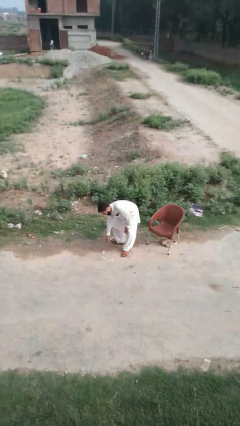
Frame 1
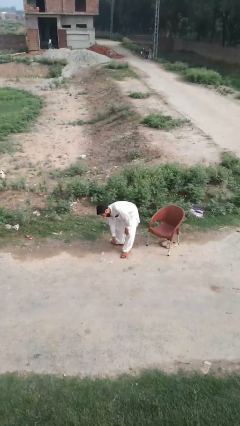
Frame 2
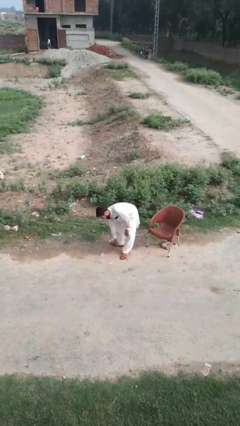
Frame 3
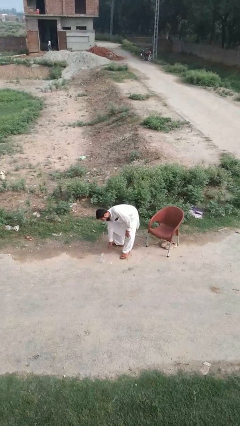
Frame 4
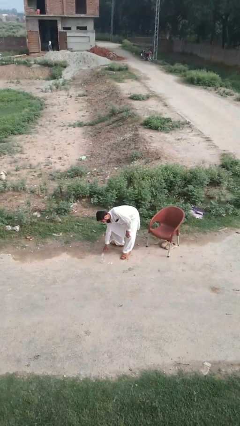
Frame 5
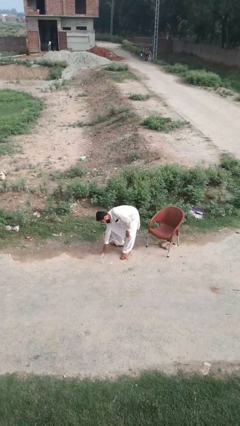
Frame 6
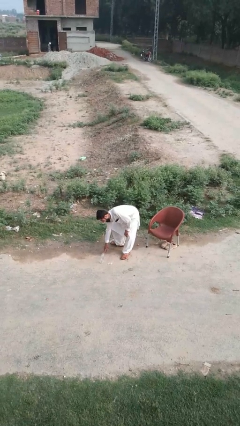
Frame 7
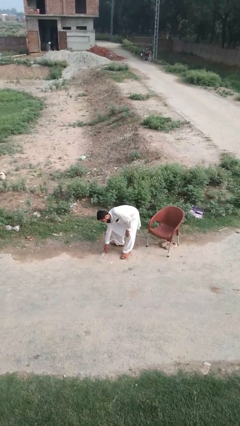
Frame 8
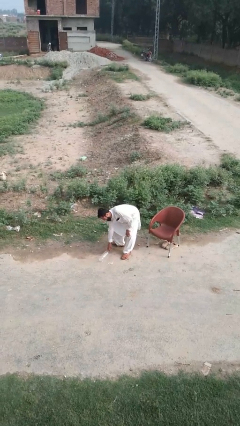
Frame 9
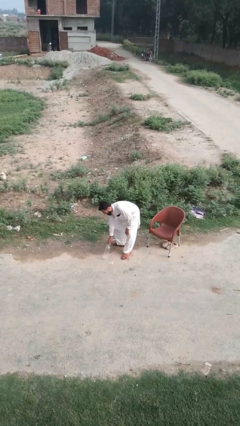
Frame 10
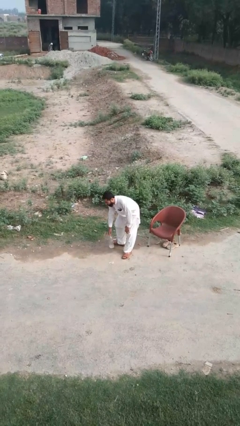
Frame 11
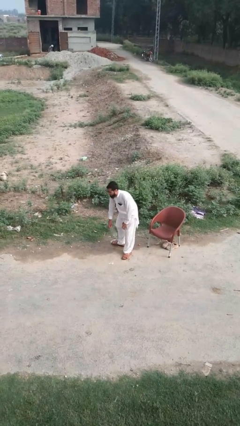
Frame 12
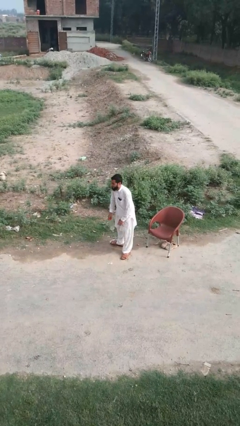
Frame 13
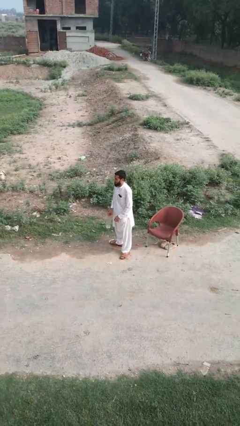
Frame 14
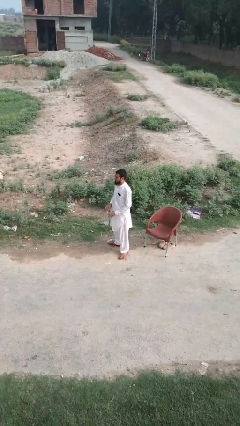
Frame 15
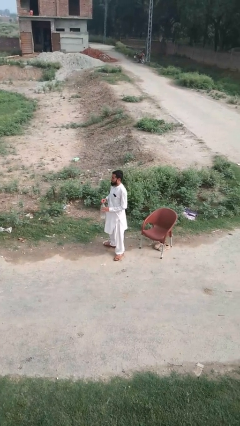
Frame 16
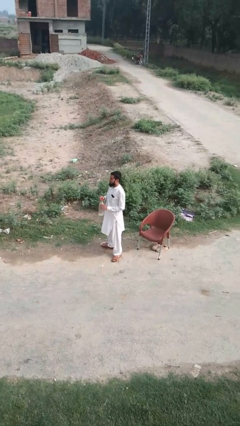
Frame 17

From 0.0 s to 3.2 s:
person picks up object from floor

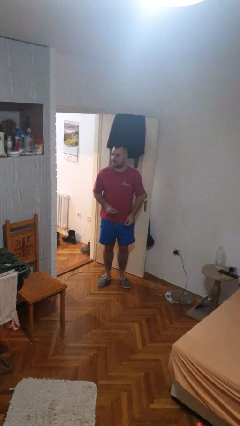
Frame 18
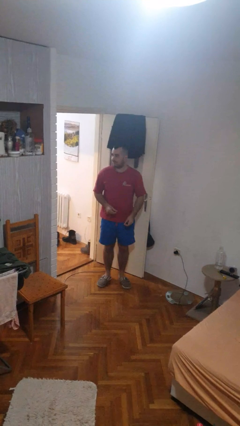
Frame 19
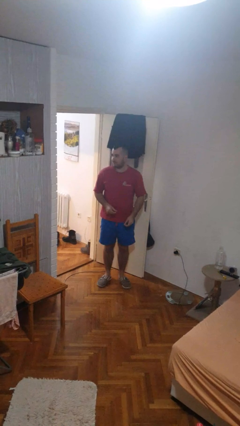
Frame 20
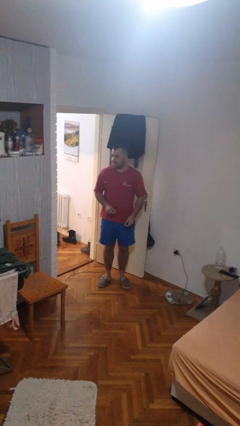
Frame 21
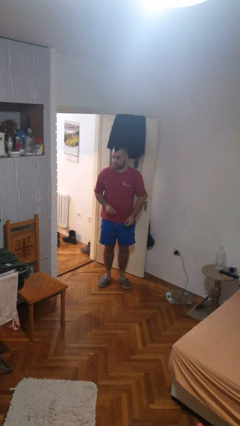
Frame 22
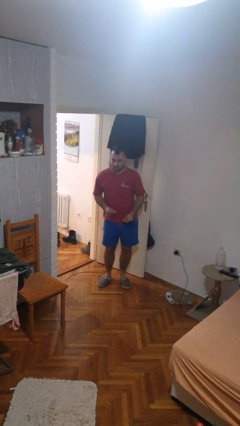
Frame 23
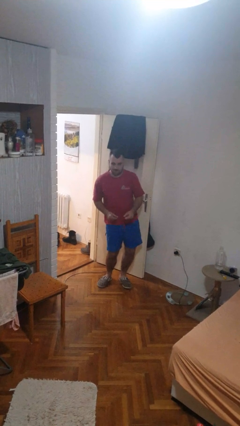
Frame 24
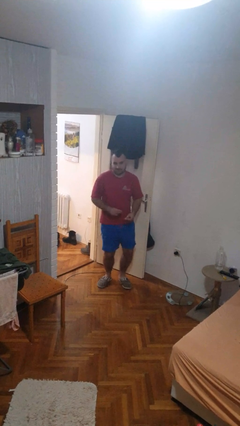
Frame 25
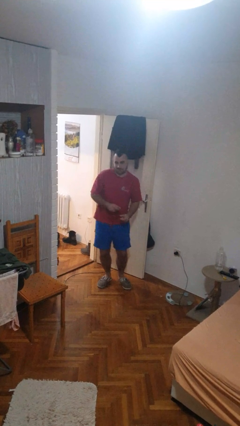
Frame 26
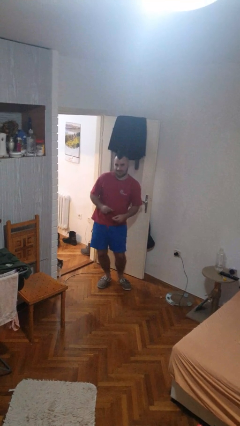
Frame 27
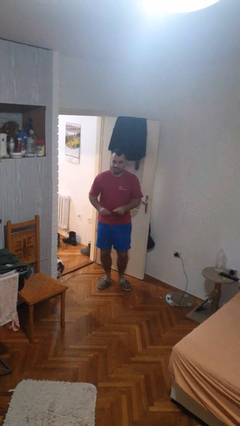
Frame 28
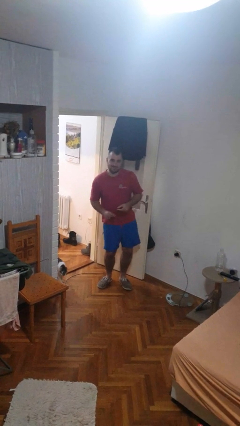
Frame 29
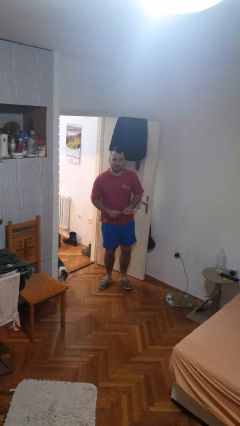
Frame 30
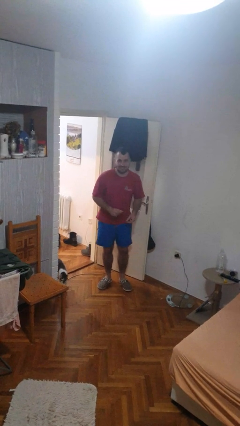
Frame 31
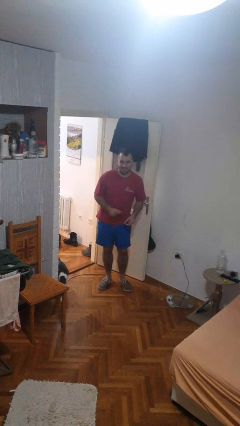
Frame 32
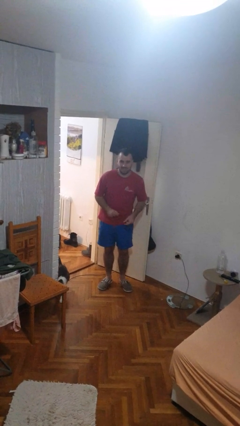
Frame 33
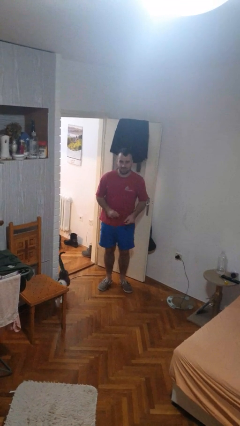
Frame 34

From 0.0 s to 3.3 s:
person dances in place

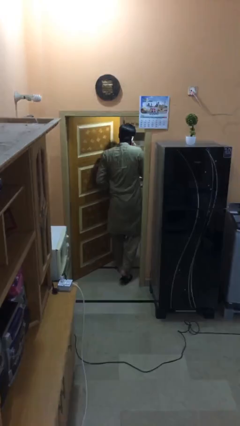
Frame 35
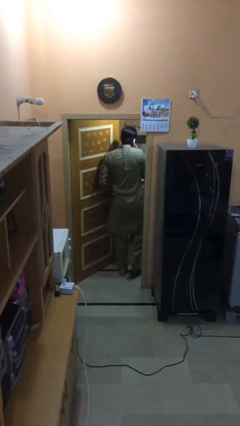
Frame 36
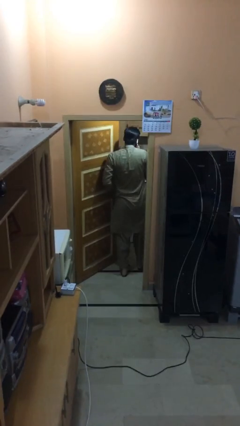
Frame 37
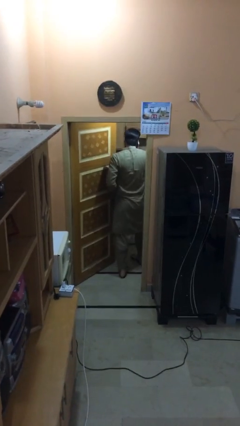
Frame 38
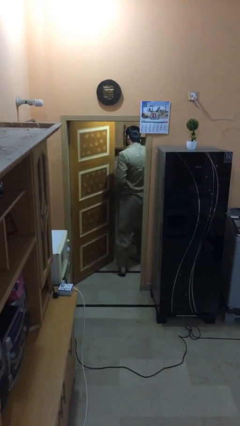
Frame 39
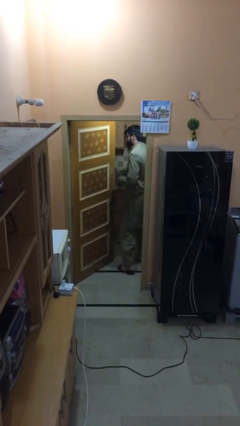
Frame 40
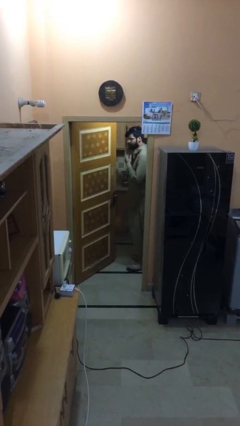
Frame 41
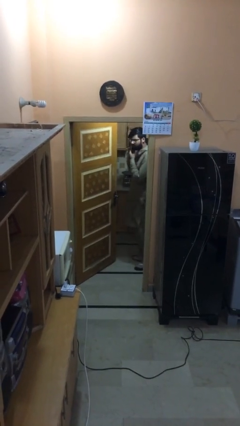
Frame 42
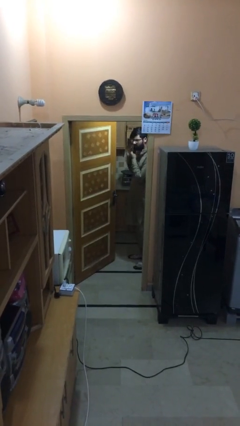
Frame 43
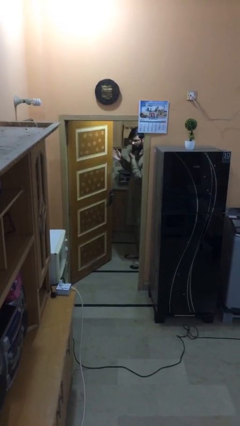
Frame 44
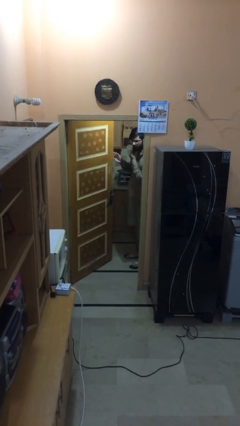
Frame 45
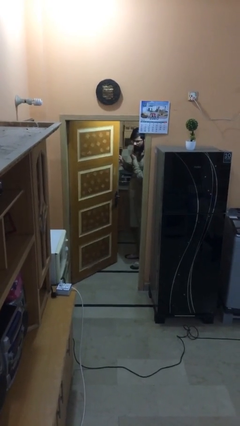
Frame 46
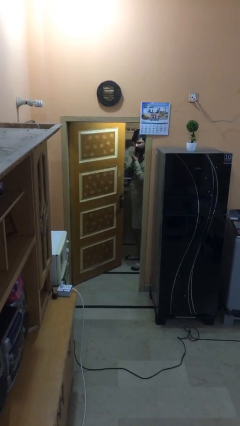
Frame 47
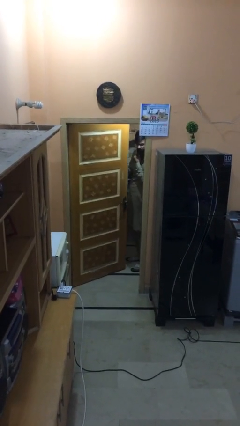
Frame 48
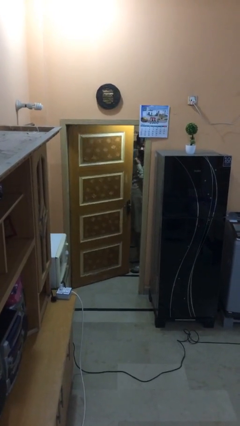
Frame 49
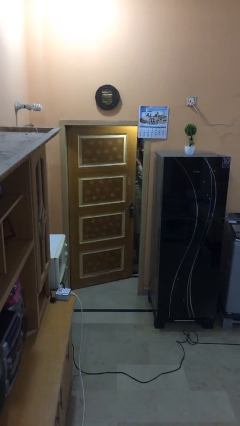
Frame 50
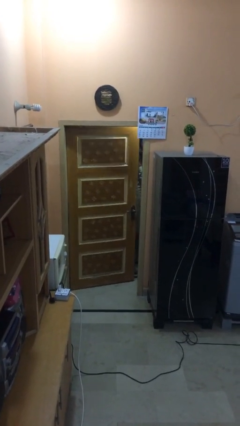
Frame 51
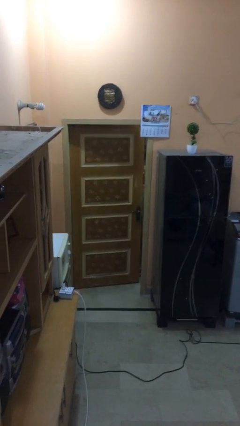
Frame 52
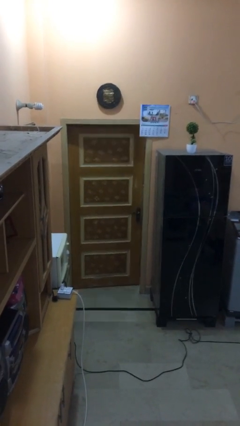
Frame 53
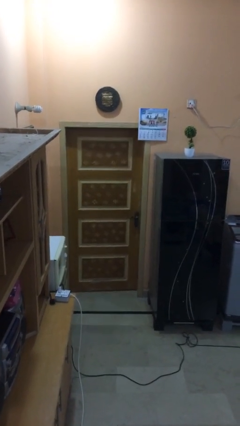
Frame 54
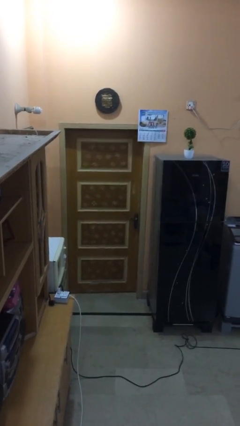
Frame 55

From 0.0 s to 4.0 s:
person closes facility door

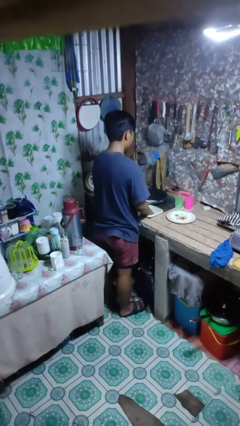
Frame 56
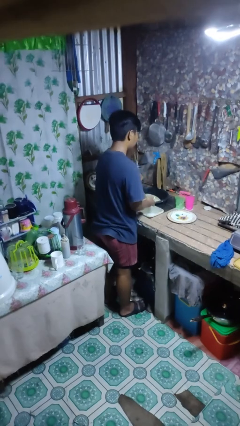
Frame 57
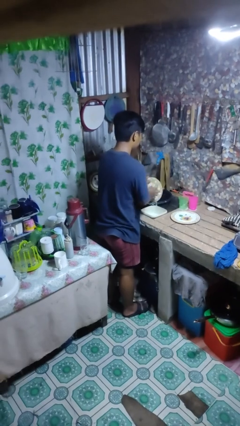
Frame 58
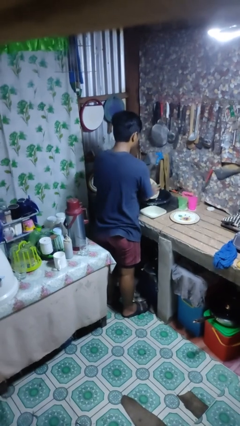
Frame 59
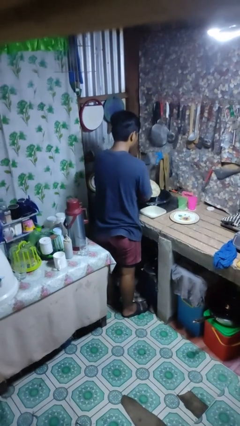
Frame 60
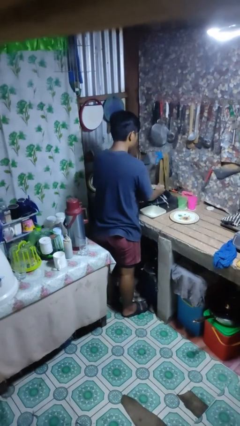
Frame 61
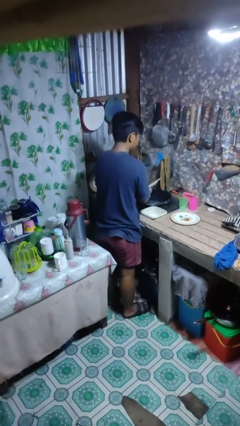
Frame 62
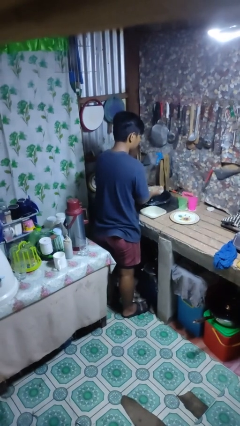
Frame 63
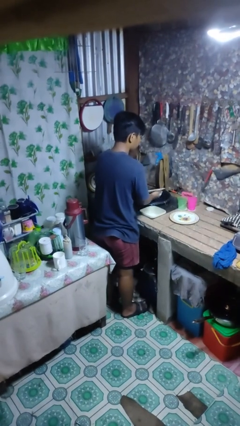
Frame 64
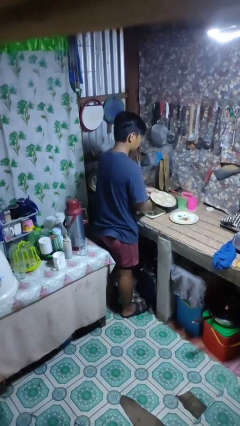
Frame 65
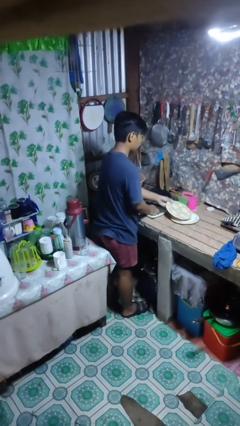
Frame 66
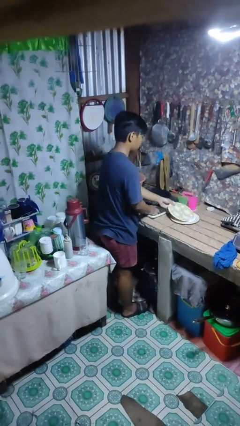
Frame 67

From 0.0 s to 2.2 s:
person washes dish

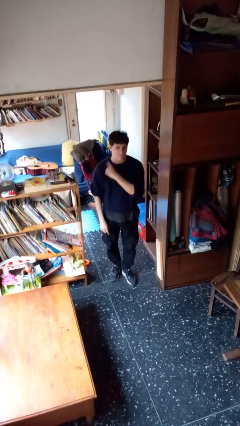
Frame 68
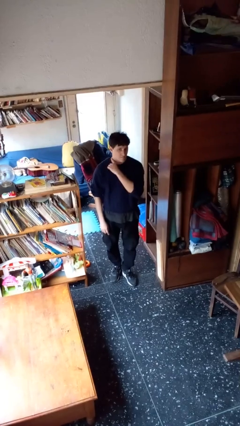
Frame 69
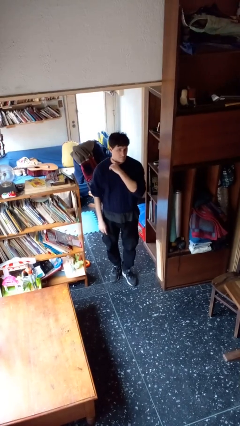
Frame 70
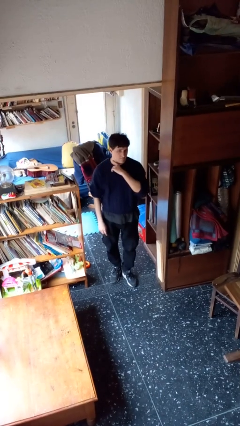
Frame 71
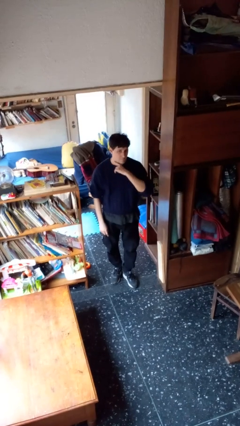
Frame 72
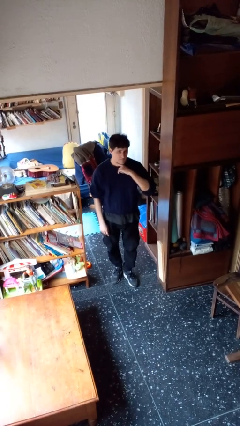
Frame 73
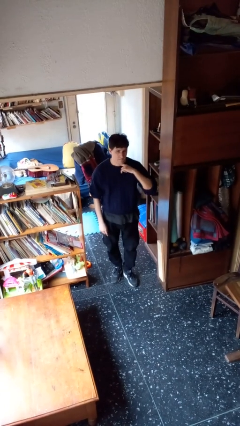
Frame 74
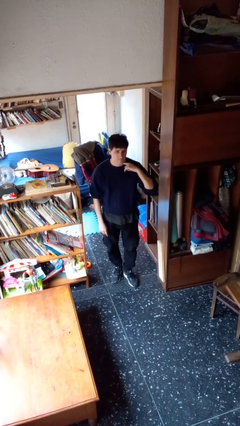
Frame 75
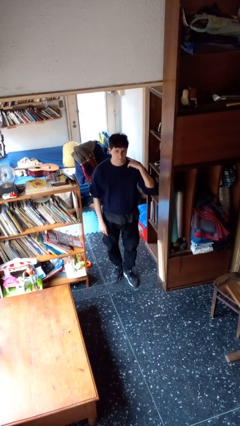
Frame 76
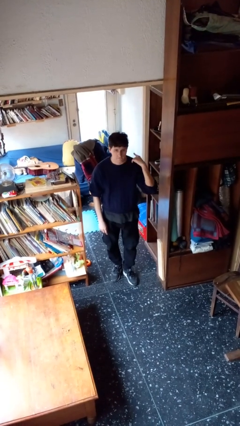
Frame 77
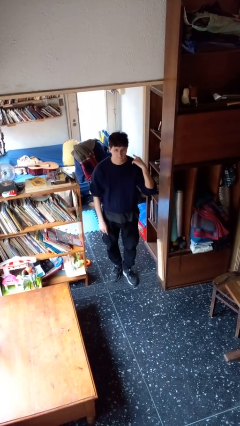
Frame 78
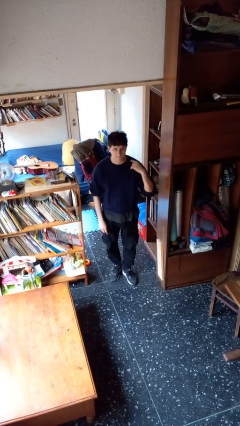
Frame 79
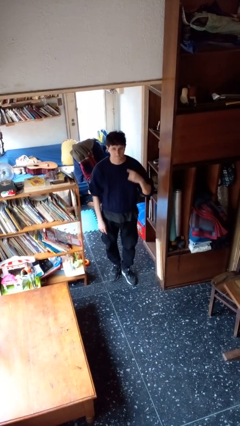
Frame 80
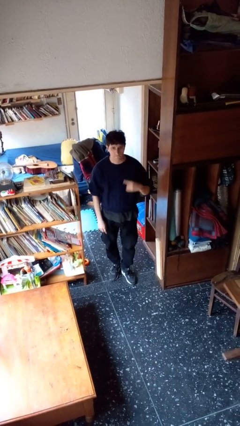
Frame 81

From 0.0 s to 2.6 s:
person gestures cut

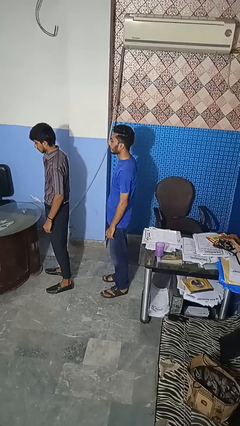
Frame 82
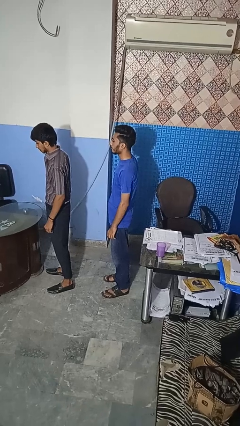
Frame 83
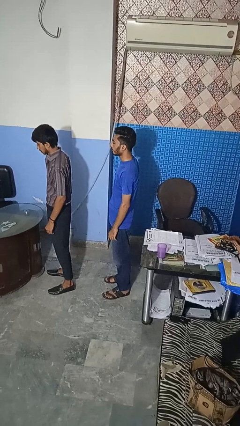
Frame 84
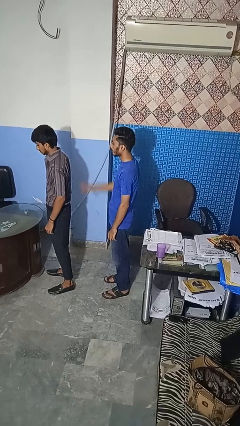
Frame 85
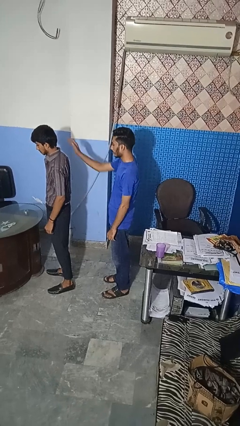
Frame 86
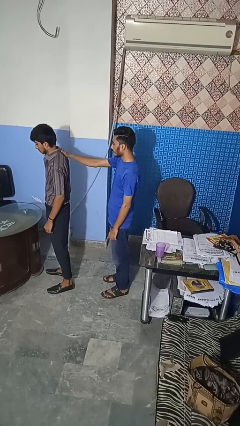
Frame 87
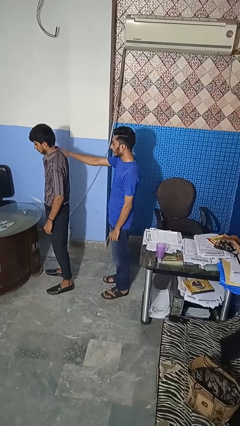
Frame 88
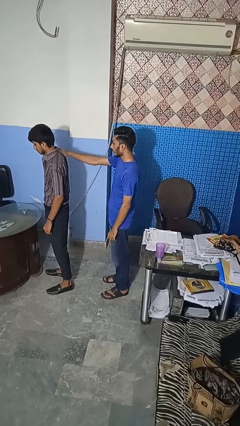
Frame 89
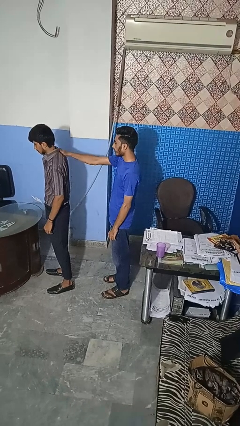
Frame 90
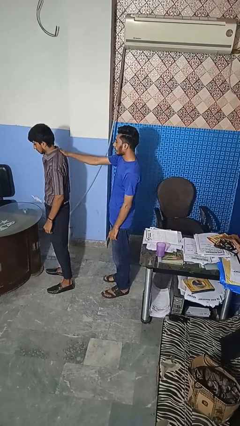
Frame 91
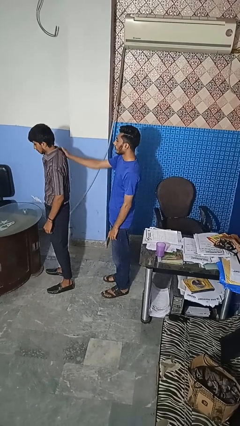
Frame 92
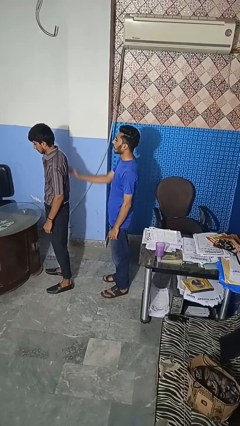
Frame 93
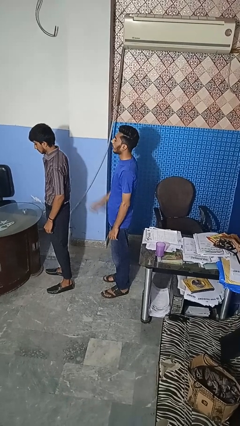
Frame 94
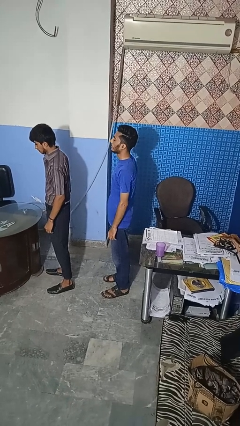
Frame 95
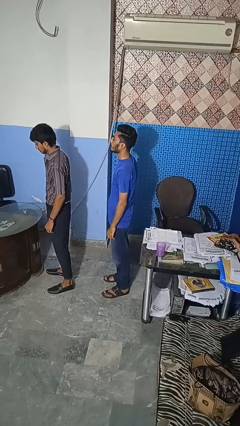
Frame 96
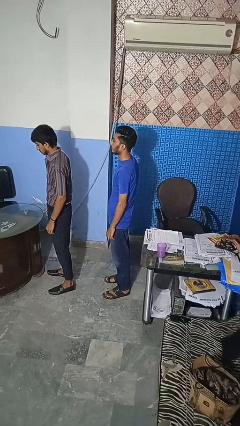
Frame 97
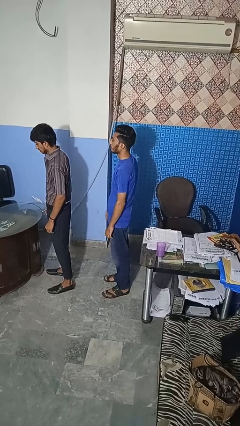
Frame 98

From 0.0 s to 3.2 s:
person touches back of person
